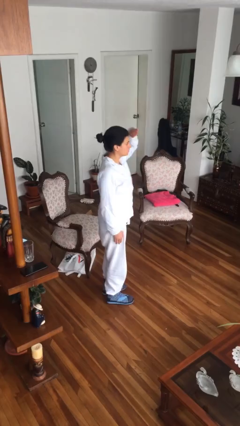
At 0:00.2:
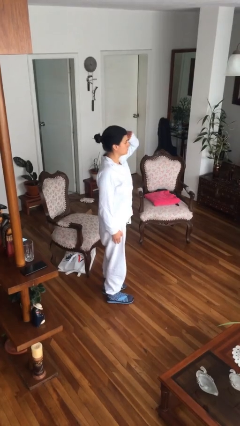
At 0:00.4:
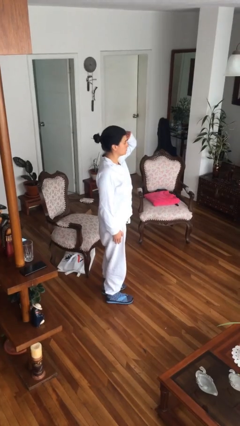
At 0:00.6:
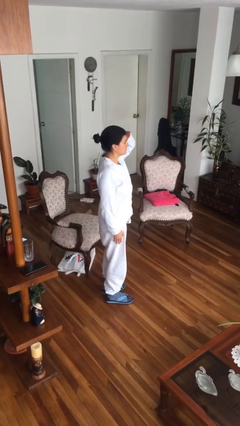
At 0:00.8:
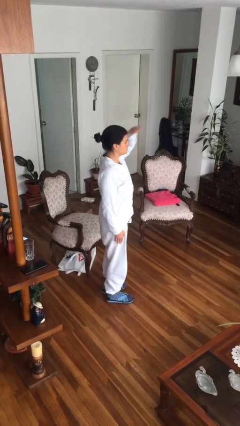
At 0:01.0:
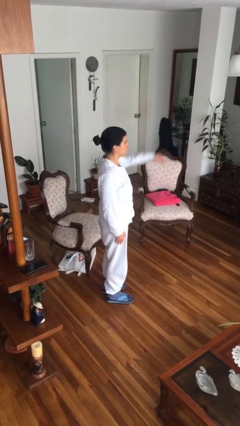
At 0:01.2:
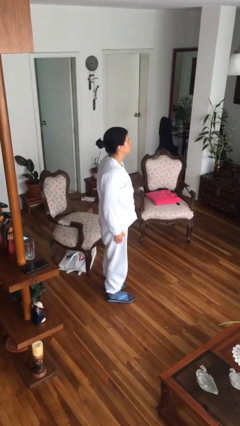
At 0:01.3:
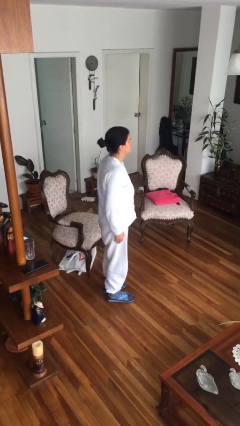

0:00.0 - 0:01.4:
person salutes

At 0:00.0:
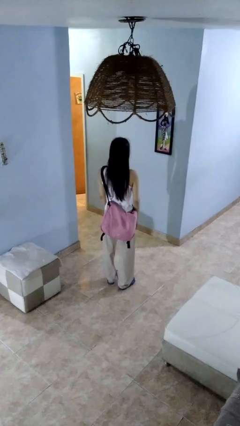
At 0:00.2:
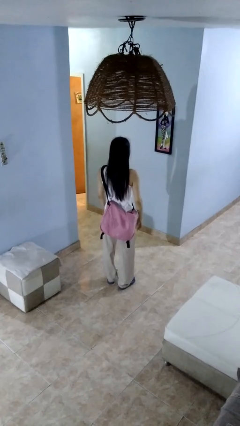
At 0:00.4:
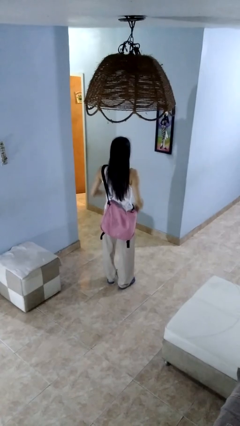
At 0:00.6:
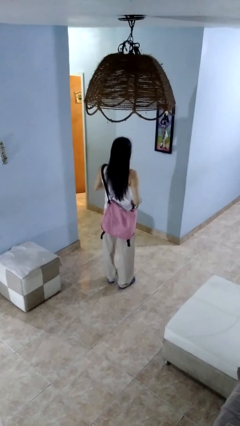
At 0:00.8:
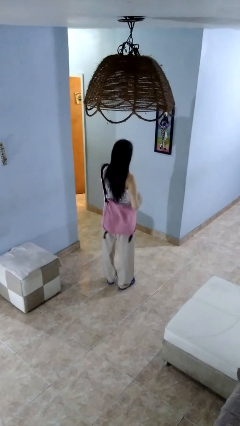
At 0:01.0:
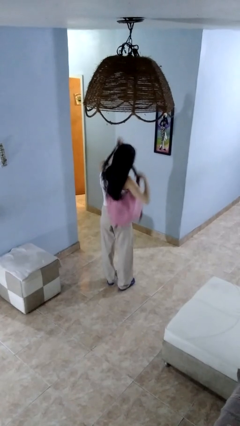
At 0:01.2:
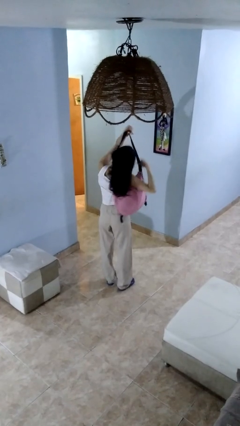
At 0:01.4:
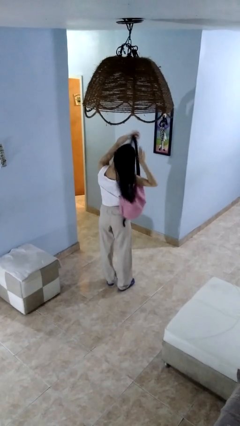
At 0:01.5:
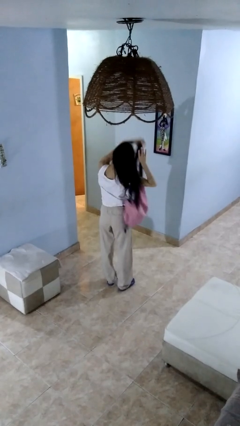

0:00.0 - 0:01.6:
person takes off backpack

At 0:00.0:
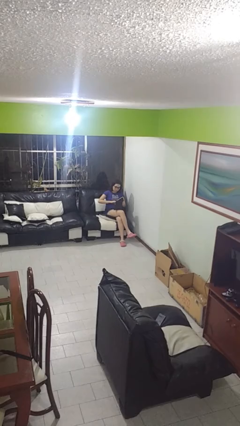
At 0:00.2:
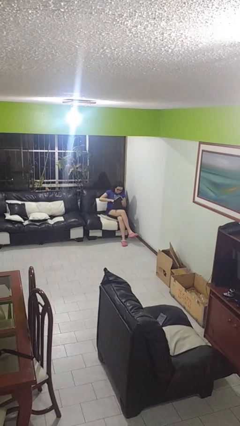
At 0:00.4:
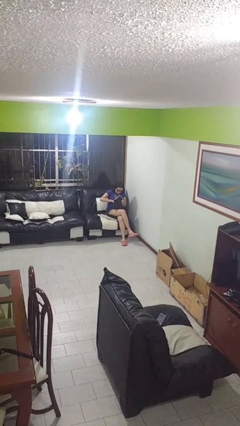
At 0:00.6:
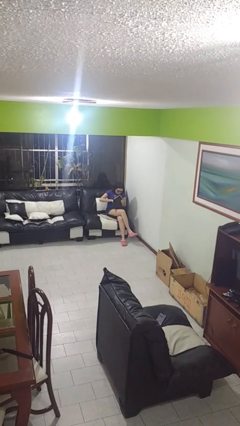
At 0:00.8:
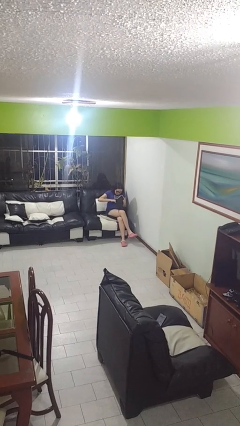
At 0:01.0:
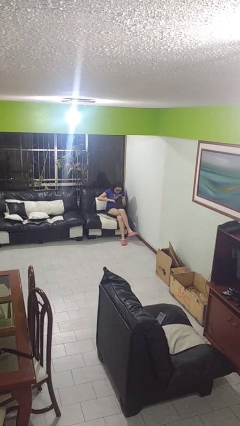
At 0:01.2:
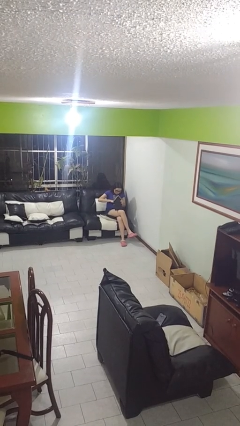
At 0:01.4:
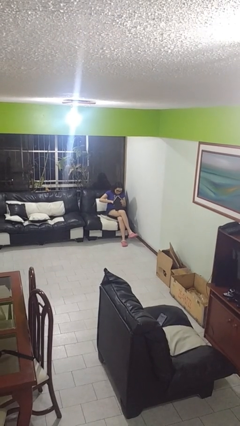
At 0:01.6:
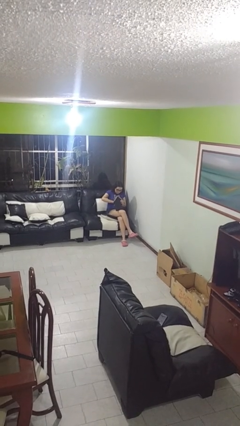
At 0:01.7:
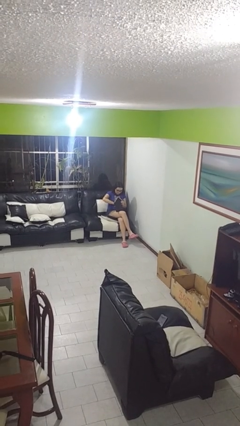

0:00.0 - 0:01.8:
person searches in purse

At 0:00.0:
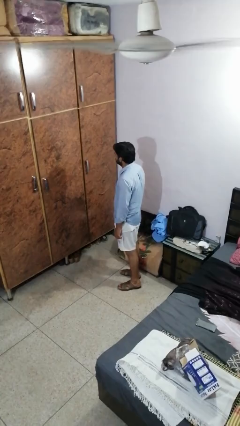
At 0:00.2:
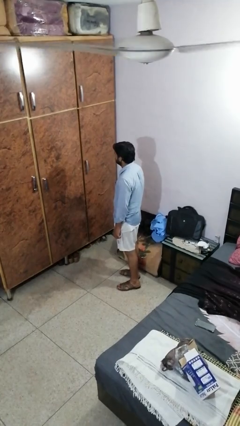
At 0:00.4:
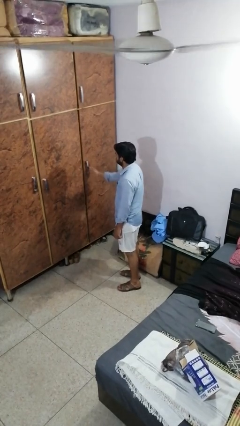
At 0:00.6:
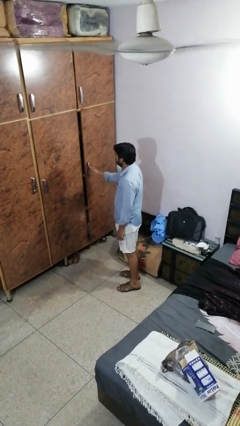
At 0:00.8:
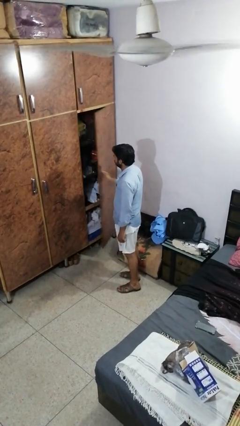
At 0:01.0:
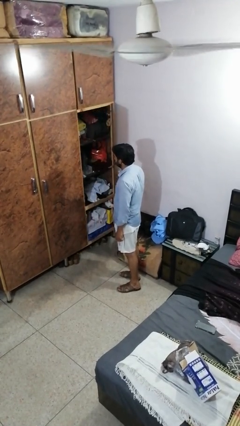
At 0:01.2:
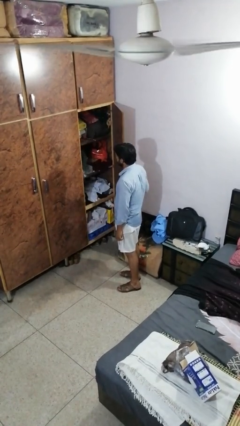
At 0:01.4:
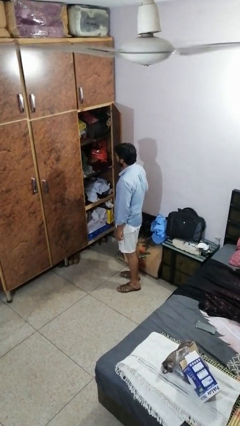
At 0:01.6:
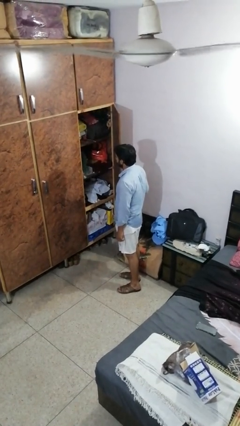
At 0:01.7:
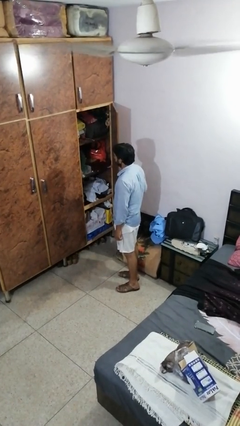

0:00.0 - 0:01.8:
person opens closet door

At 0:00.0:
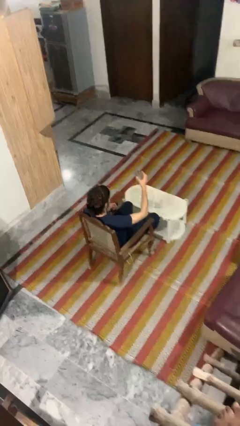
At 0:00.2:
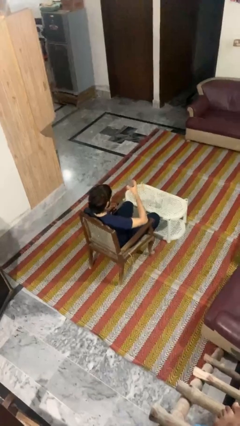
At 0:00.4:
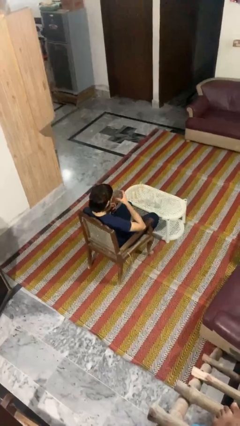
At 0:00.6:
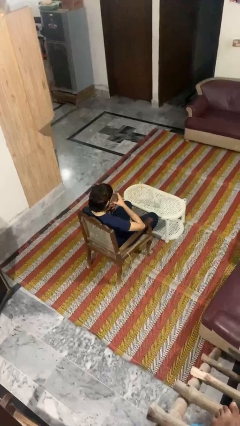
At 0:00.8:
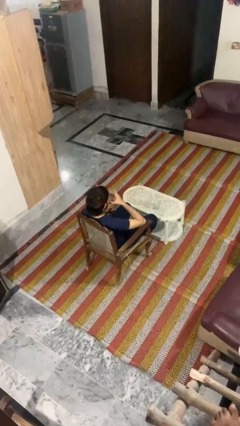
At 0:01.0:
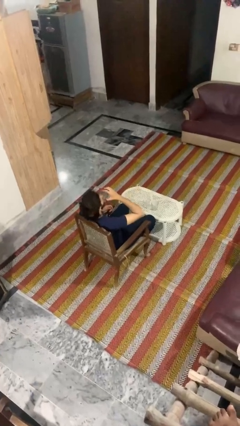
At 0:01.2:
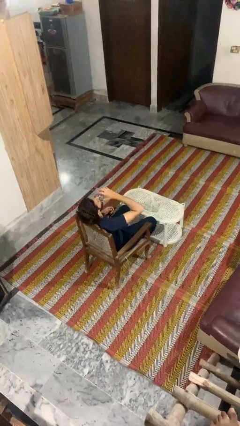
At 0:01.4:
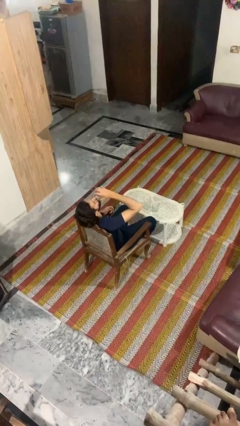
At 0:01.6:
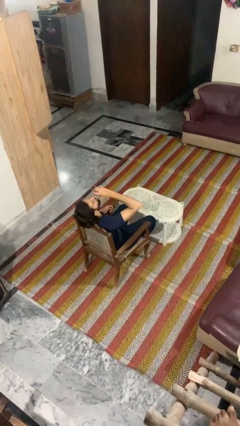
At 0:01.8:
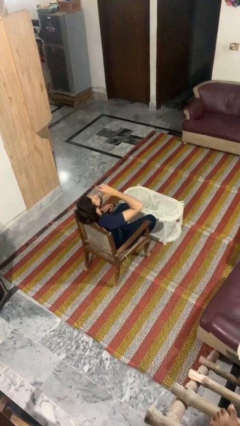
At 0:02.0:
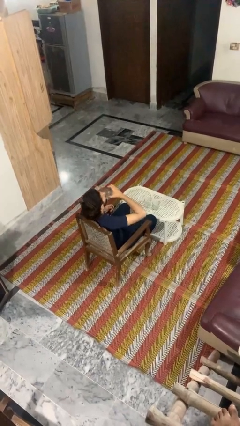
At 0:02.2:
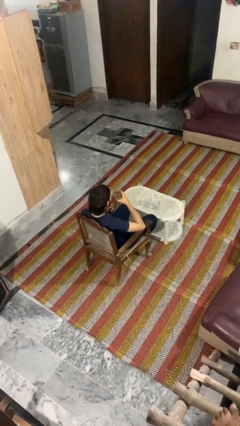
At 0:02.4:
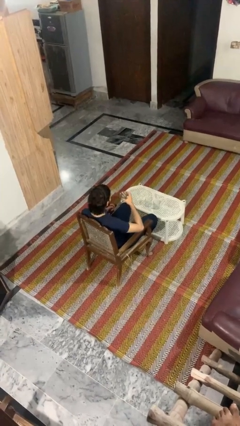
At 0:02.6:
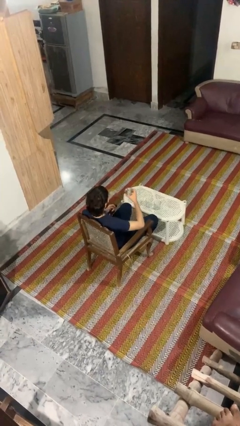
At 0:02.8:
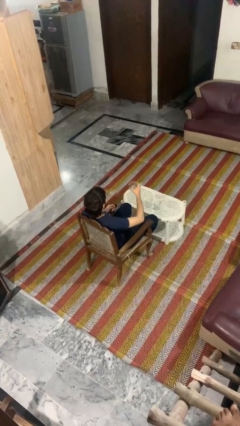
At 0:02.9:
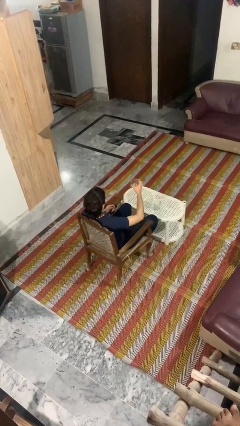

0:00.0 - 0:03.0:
person drinks from shotglass

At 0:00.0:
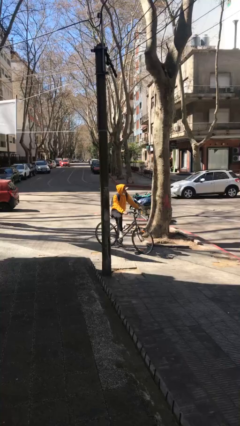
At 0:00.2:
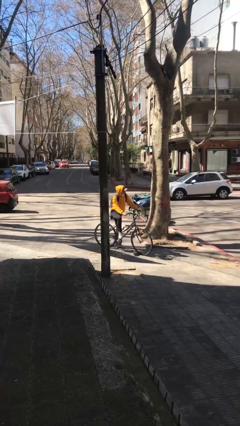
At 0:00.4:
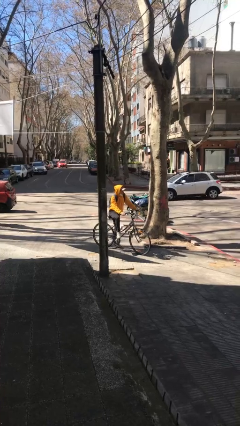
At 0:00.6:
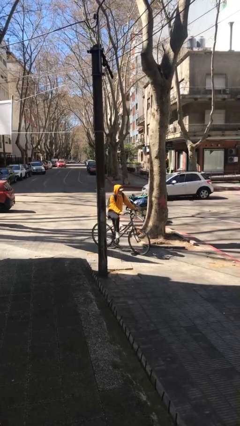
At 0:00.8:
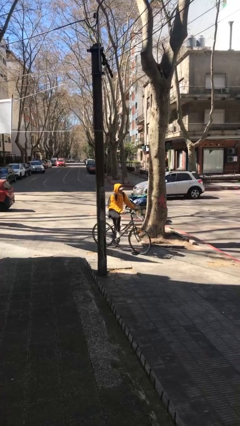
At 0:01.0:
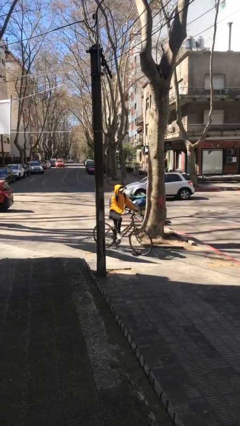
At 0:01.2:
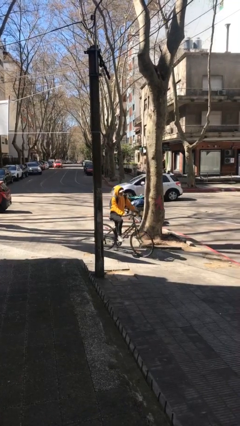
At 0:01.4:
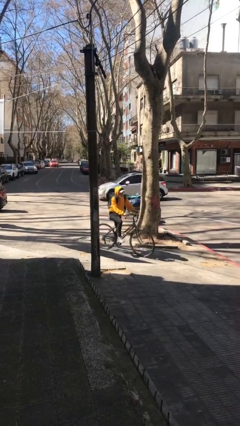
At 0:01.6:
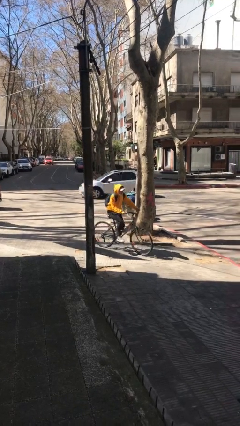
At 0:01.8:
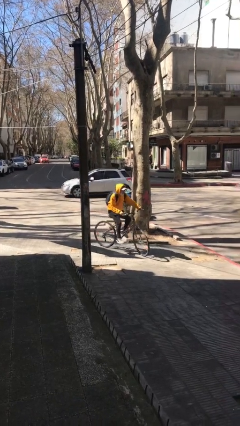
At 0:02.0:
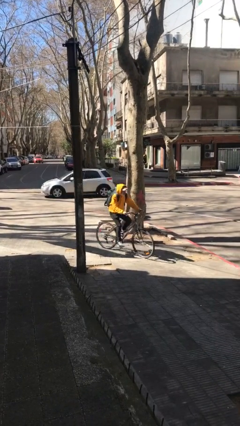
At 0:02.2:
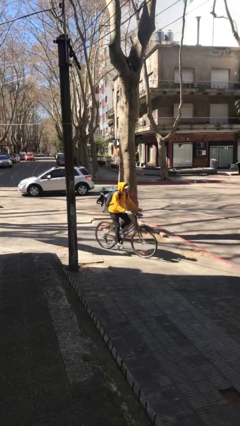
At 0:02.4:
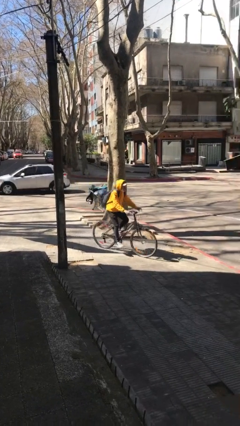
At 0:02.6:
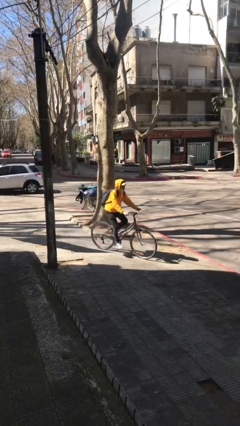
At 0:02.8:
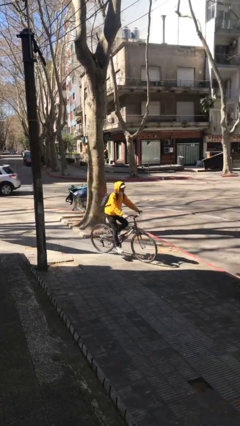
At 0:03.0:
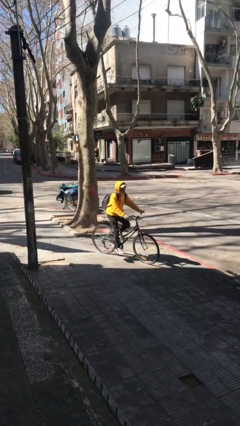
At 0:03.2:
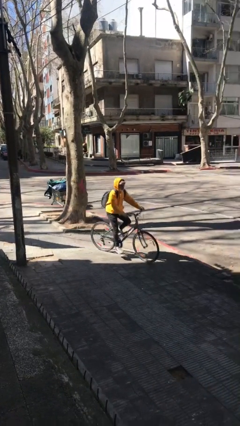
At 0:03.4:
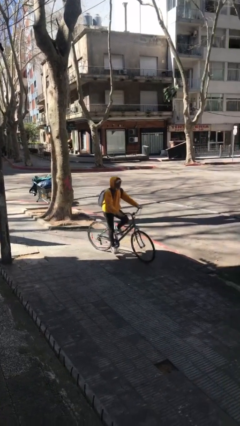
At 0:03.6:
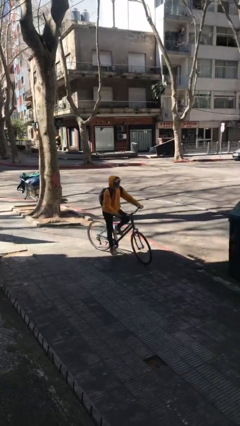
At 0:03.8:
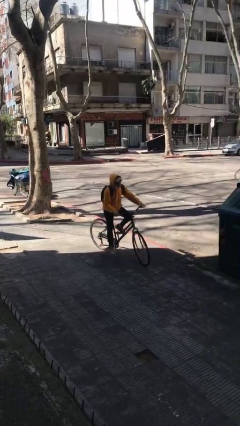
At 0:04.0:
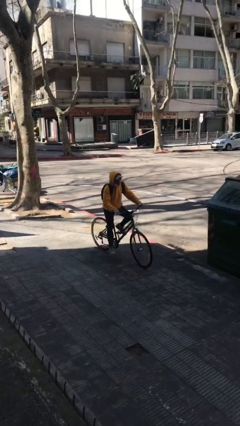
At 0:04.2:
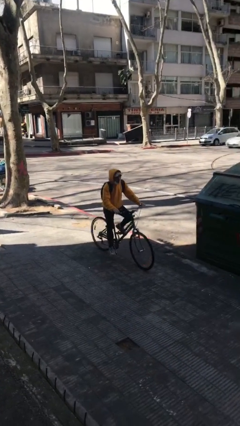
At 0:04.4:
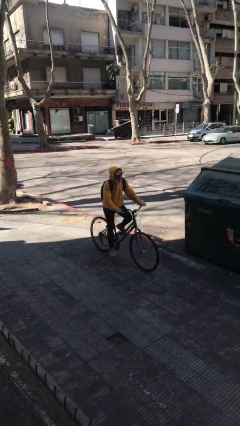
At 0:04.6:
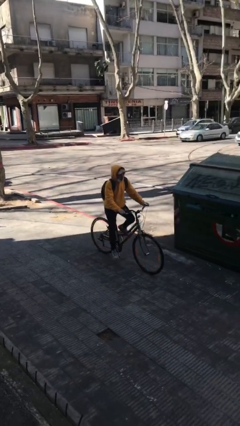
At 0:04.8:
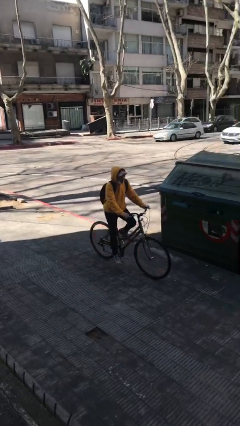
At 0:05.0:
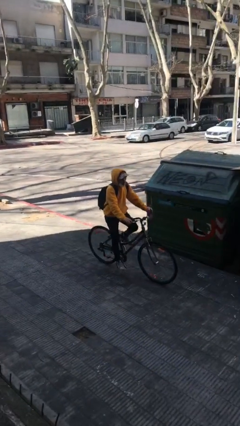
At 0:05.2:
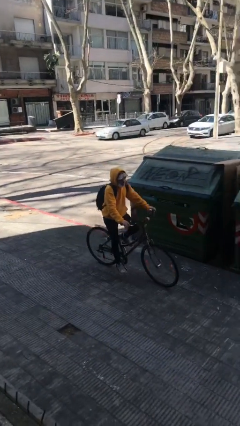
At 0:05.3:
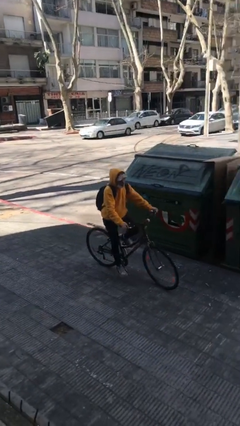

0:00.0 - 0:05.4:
person rides bicycle

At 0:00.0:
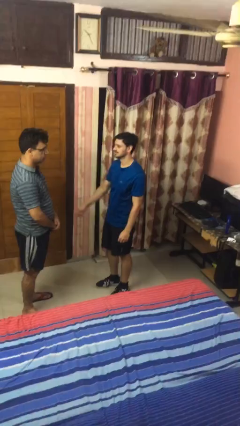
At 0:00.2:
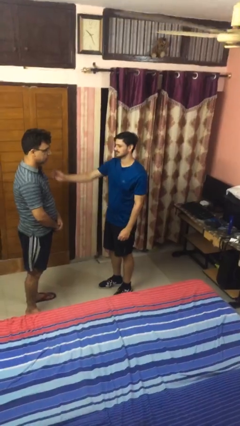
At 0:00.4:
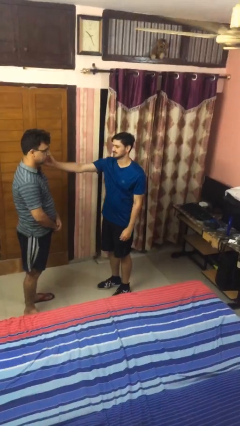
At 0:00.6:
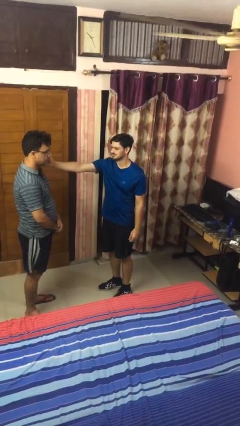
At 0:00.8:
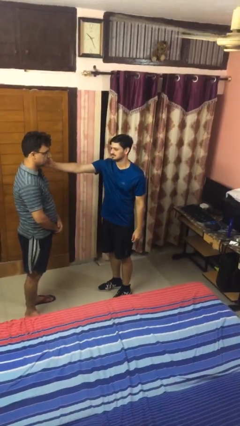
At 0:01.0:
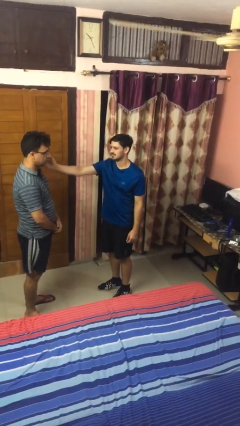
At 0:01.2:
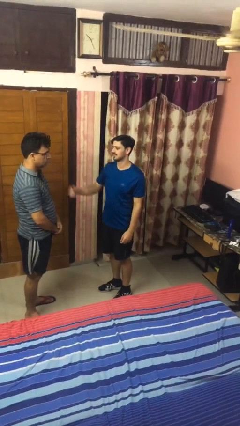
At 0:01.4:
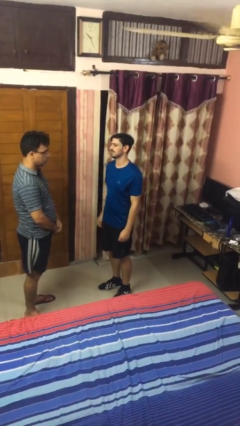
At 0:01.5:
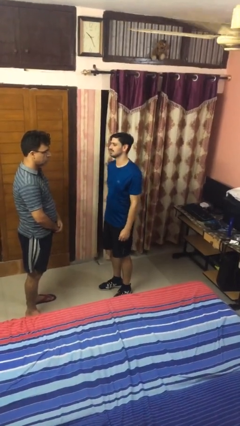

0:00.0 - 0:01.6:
person touches face of person

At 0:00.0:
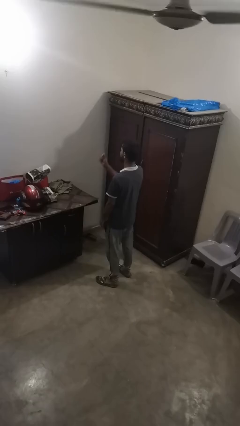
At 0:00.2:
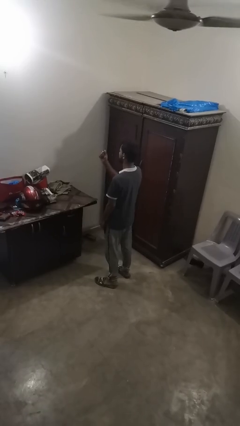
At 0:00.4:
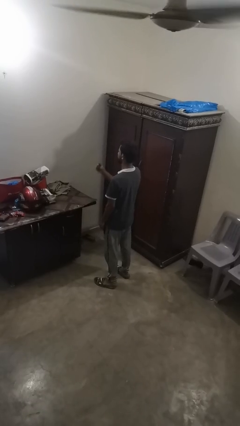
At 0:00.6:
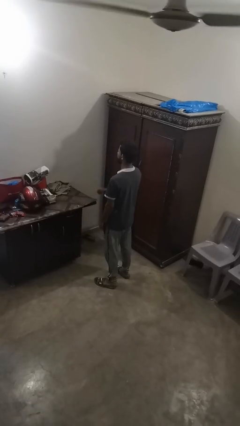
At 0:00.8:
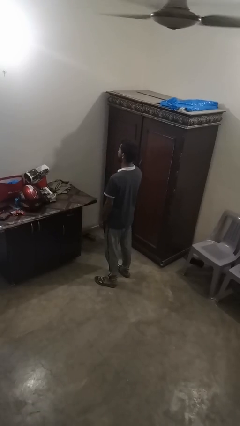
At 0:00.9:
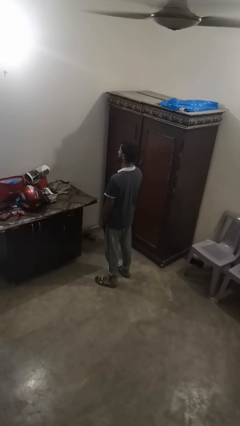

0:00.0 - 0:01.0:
person snaps fingers
